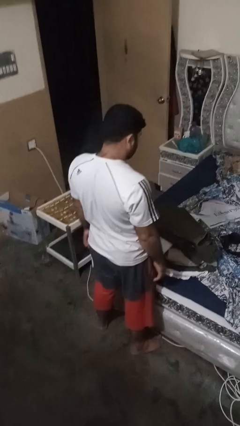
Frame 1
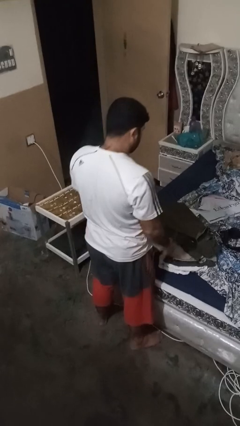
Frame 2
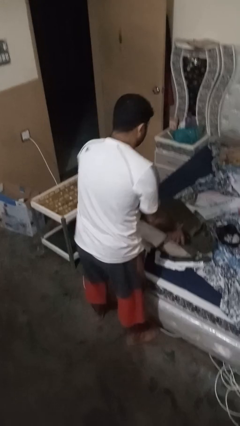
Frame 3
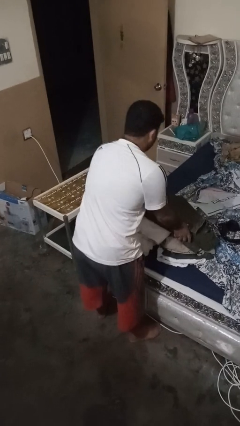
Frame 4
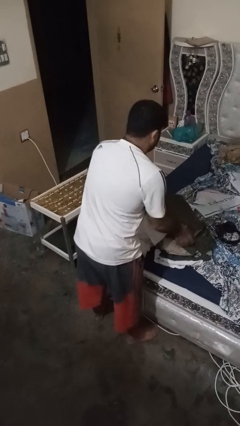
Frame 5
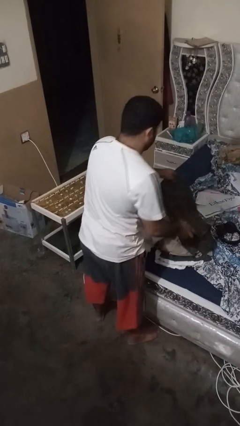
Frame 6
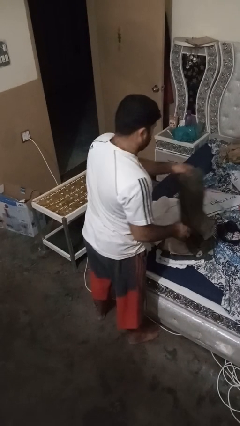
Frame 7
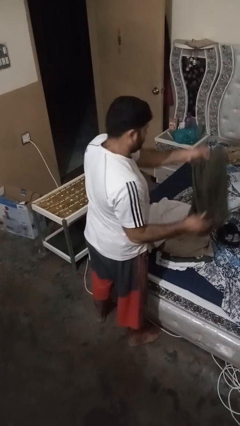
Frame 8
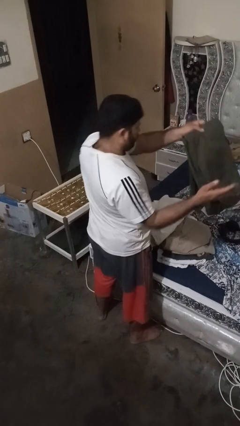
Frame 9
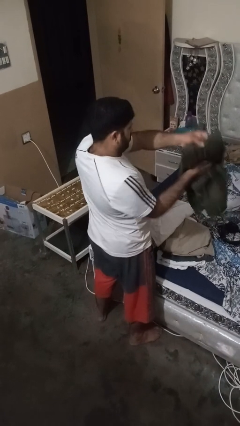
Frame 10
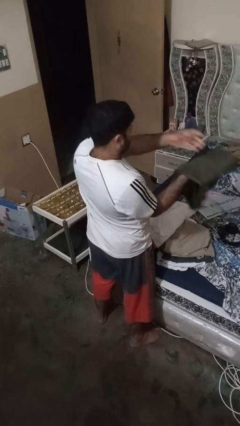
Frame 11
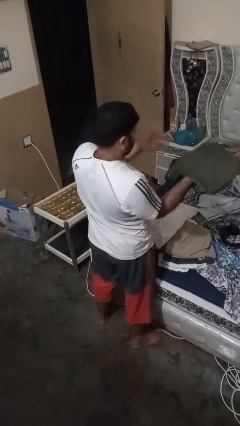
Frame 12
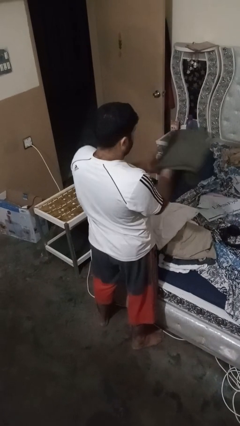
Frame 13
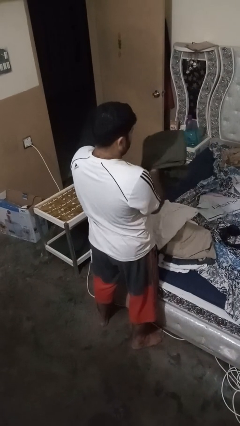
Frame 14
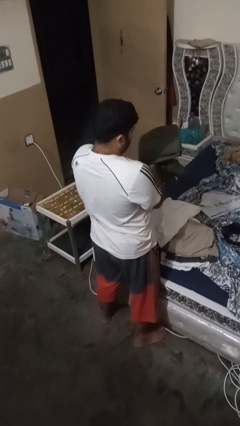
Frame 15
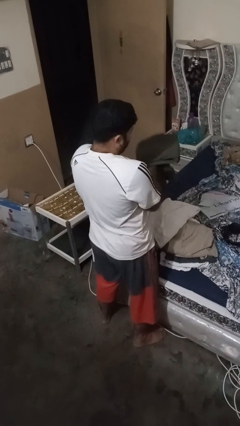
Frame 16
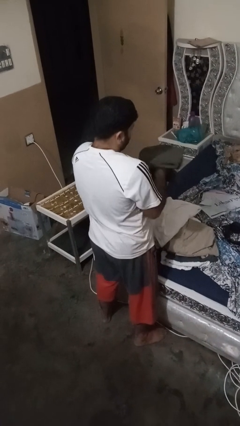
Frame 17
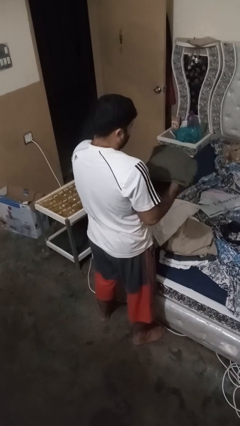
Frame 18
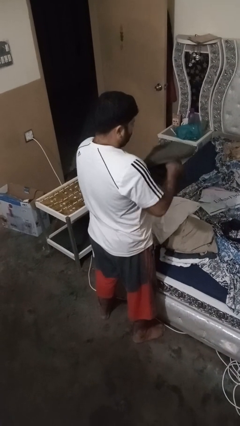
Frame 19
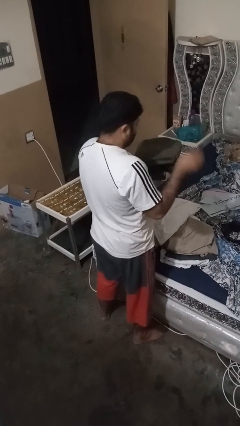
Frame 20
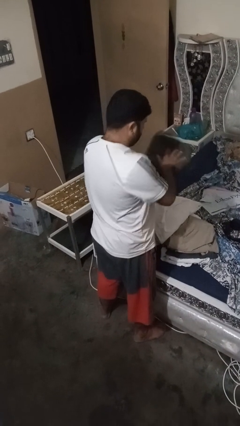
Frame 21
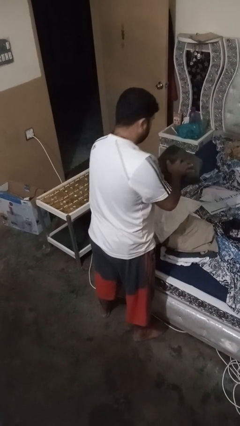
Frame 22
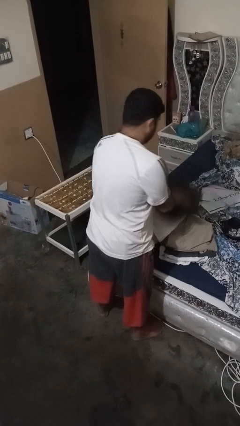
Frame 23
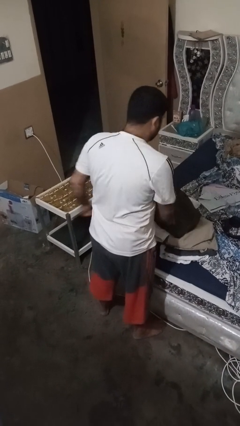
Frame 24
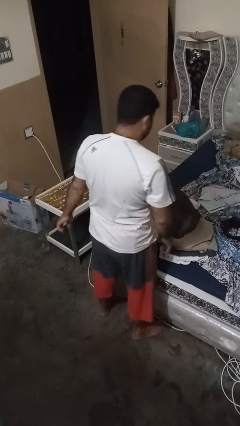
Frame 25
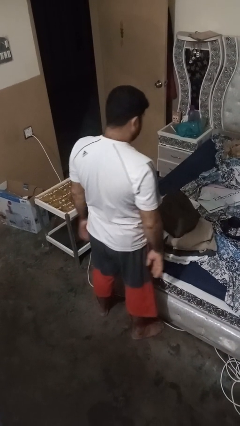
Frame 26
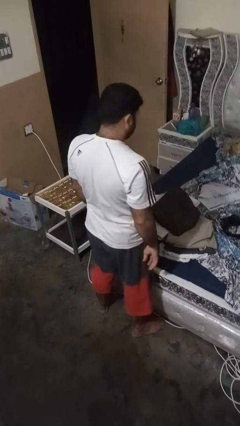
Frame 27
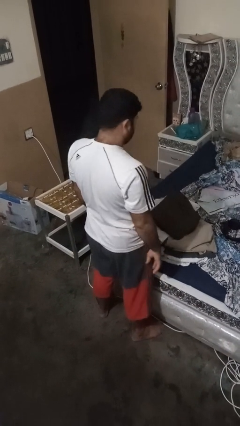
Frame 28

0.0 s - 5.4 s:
person folds pants

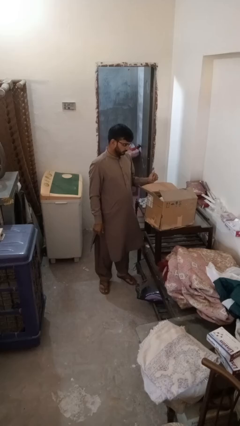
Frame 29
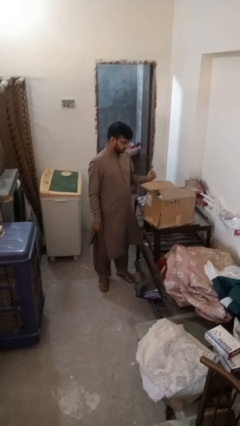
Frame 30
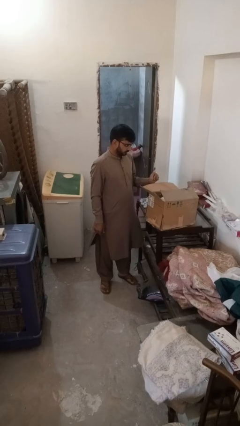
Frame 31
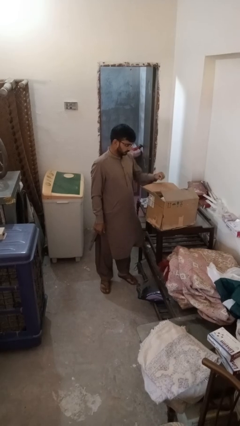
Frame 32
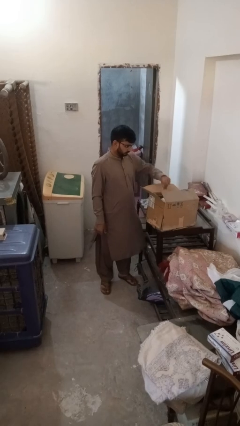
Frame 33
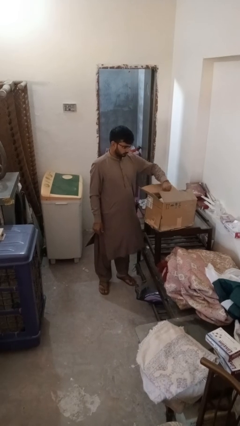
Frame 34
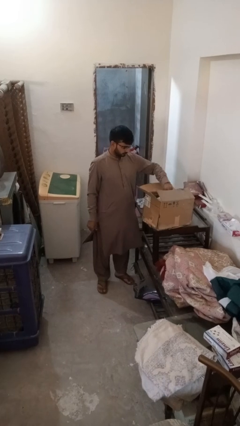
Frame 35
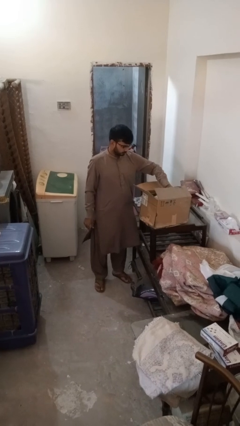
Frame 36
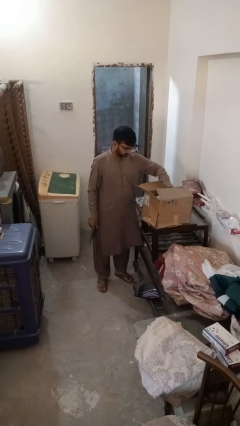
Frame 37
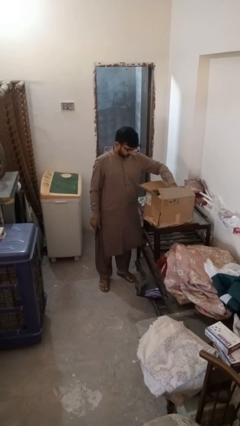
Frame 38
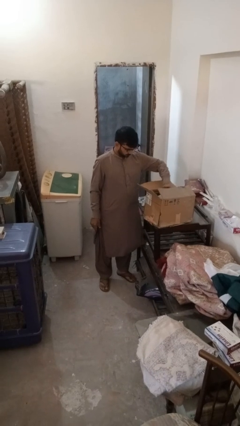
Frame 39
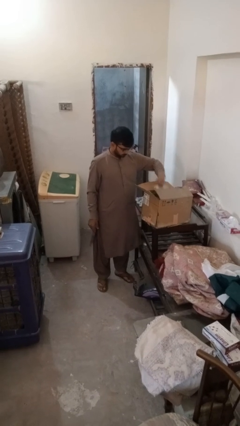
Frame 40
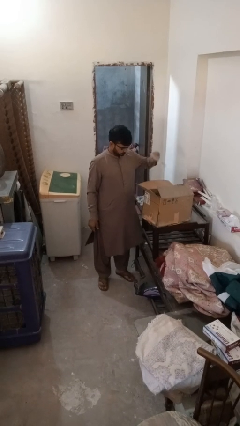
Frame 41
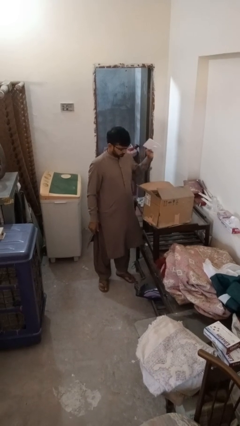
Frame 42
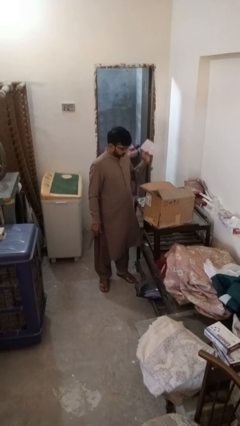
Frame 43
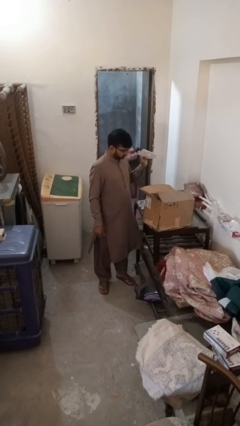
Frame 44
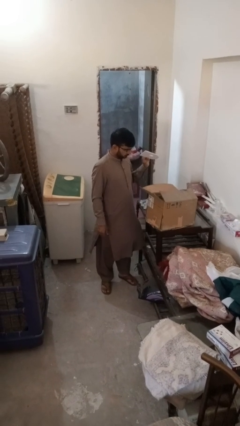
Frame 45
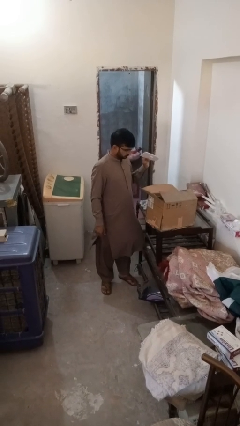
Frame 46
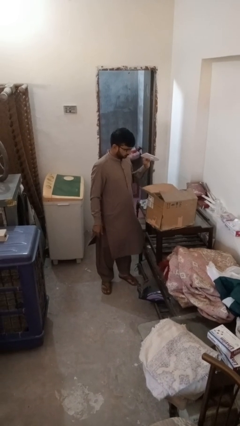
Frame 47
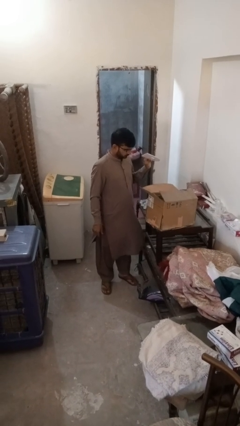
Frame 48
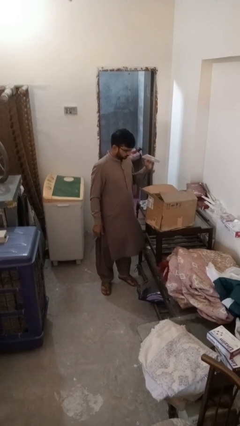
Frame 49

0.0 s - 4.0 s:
person takes object from box

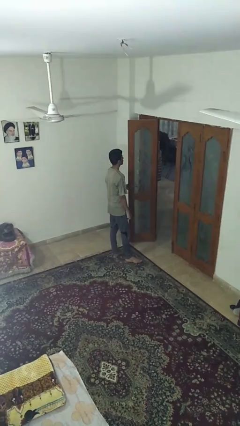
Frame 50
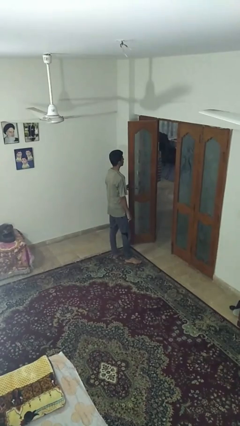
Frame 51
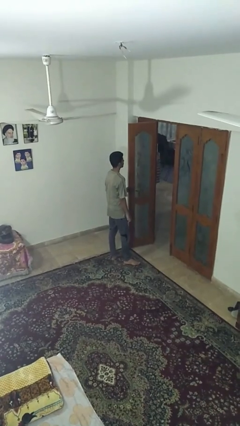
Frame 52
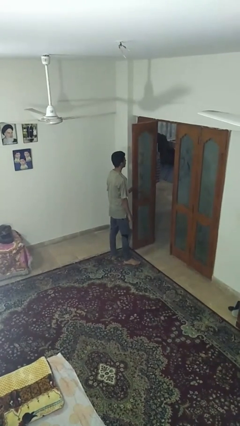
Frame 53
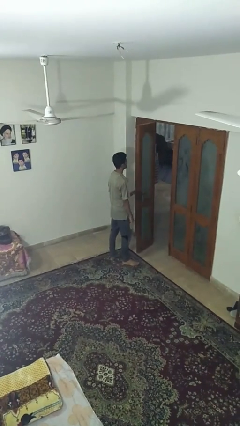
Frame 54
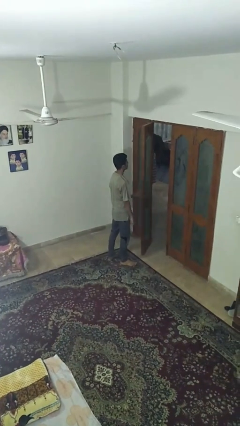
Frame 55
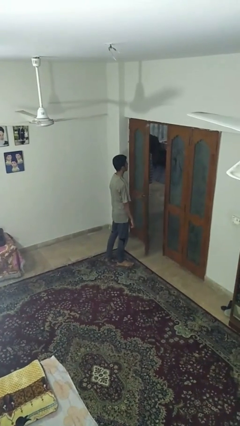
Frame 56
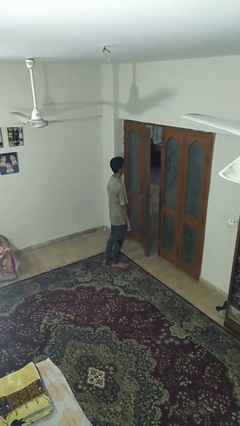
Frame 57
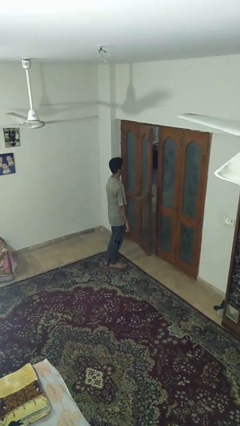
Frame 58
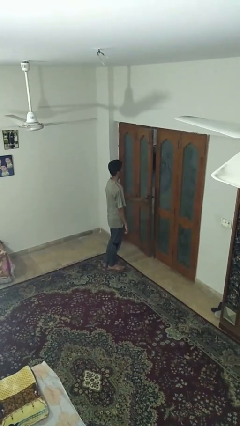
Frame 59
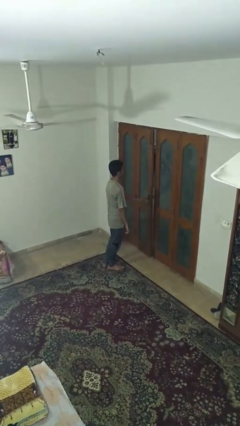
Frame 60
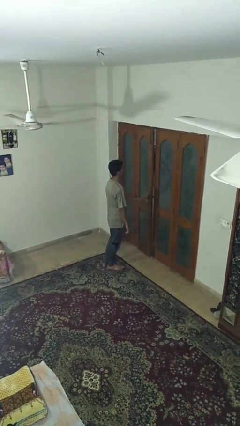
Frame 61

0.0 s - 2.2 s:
person closes facility door

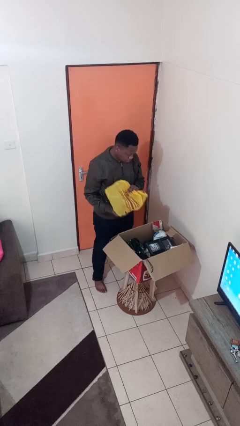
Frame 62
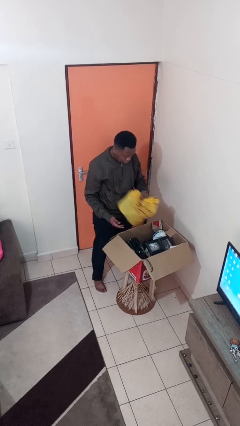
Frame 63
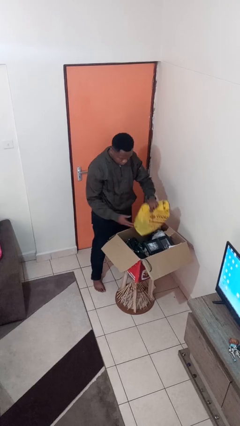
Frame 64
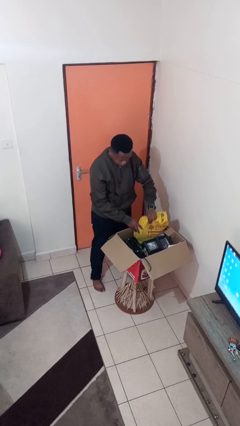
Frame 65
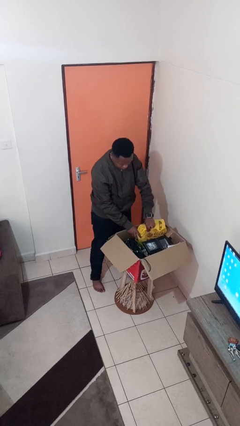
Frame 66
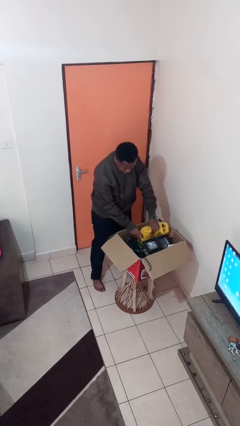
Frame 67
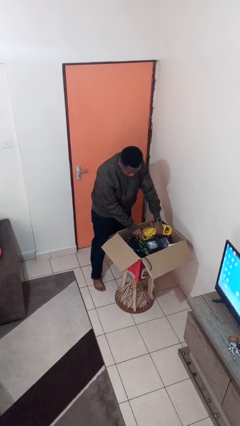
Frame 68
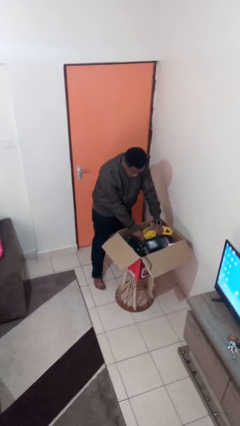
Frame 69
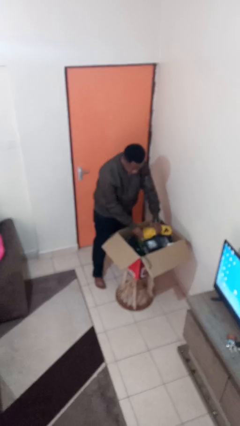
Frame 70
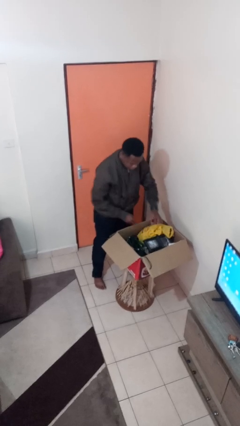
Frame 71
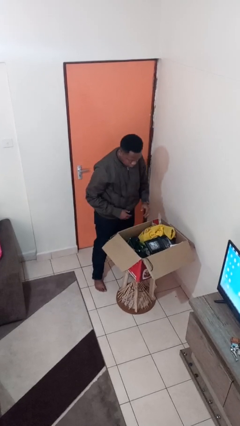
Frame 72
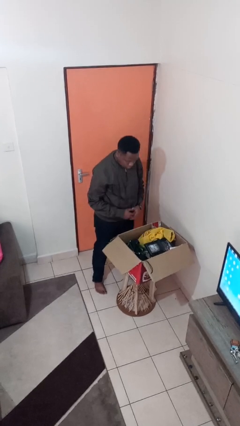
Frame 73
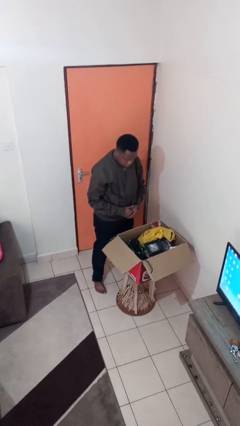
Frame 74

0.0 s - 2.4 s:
person puts object into box

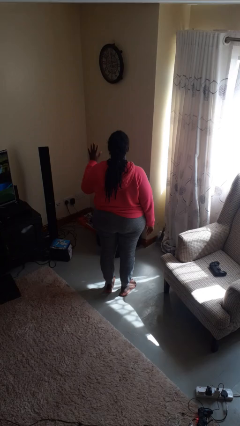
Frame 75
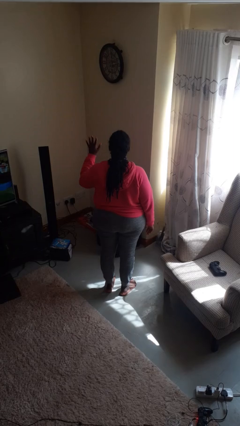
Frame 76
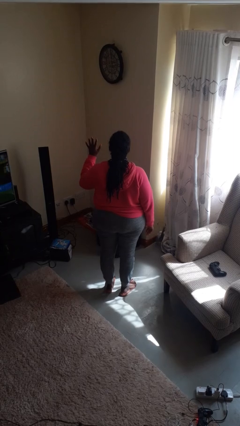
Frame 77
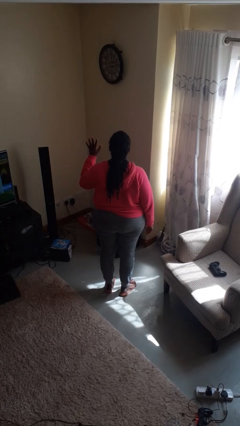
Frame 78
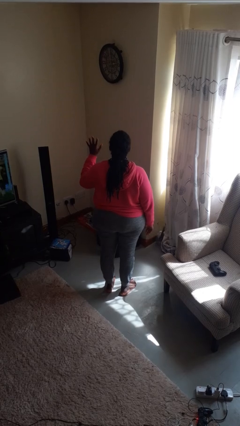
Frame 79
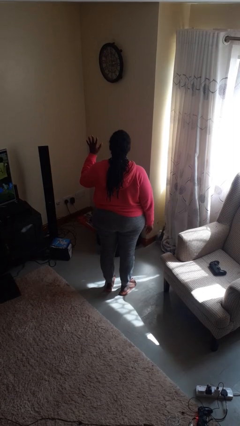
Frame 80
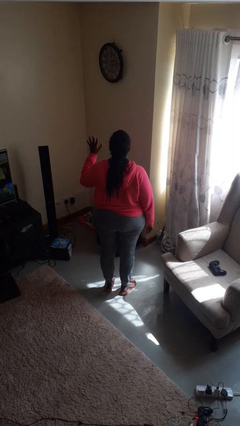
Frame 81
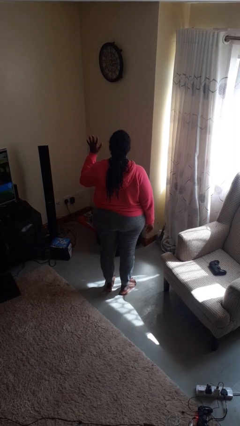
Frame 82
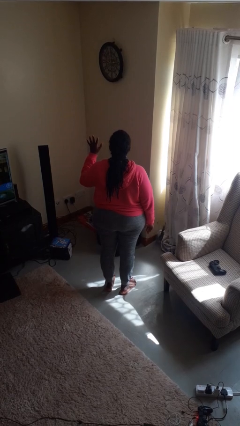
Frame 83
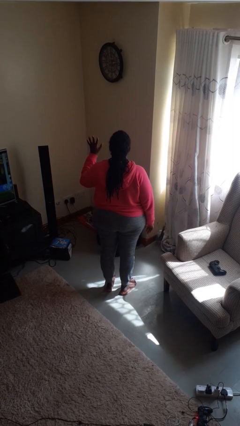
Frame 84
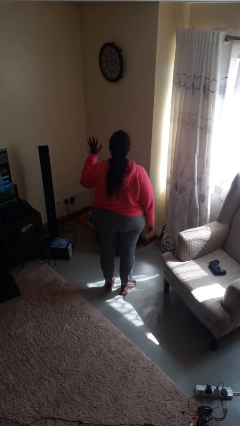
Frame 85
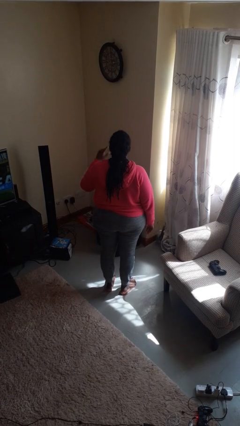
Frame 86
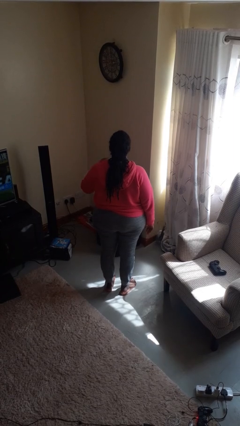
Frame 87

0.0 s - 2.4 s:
person gestures number five

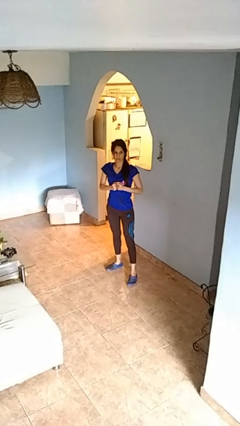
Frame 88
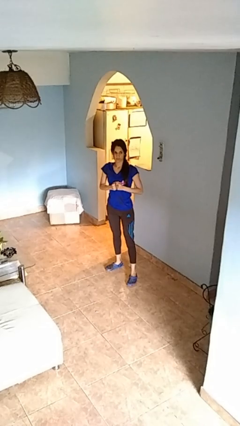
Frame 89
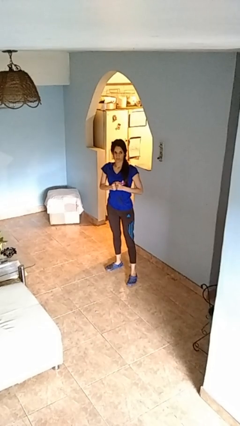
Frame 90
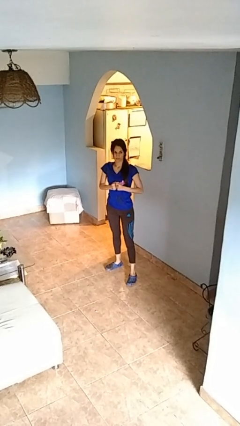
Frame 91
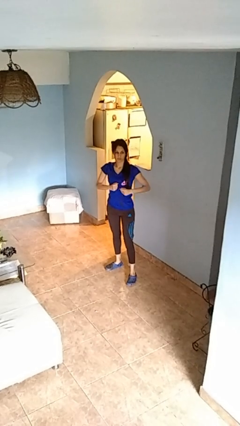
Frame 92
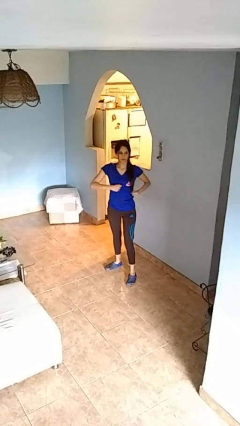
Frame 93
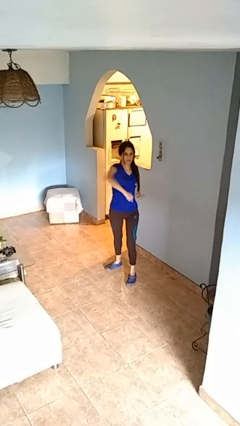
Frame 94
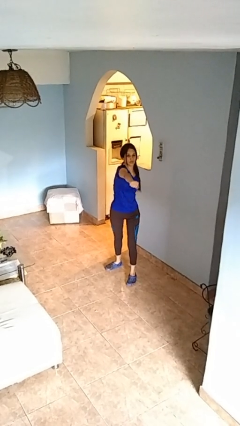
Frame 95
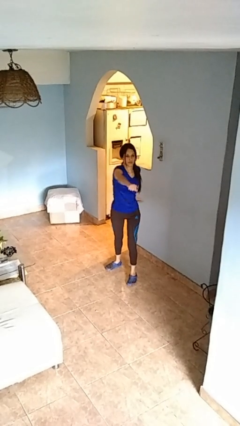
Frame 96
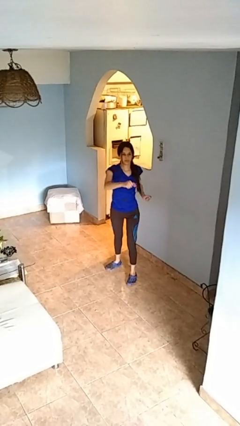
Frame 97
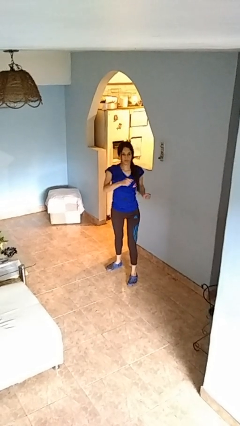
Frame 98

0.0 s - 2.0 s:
person punches
